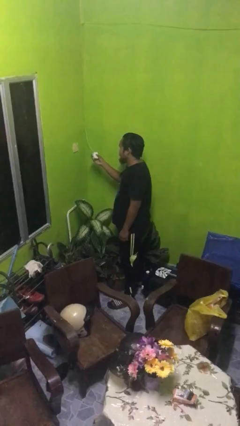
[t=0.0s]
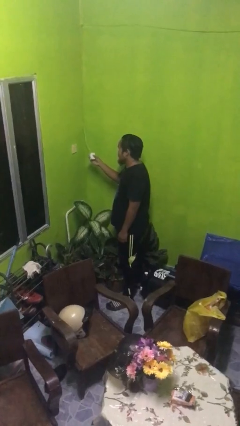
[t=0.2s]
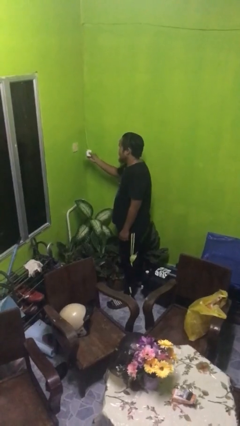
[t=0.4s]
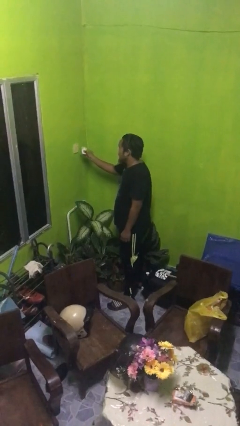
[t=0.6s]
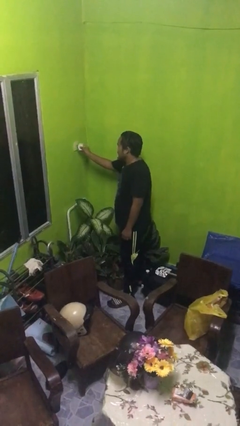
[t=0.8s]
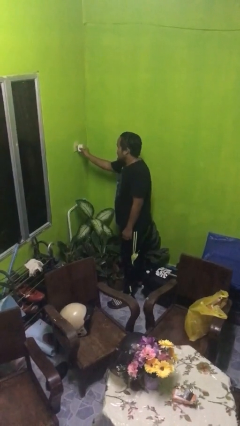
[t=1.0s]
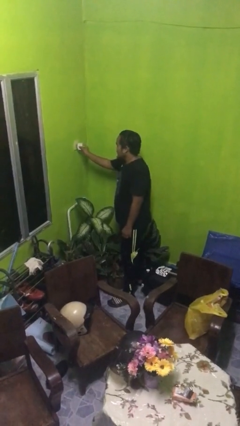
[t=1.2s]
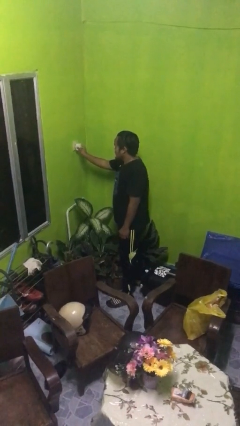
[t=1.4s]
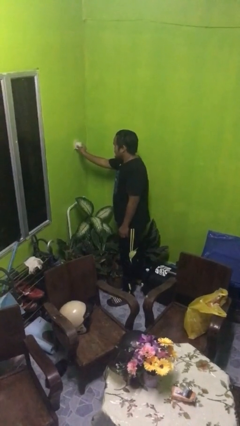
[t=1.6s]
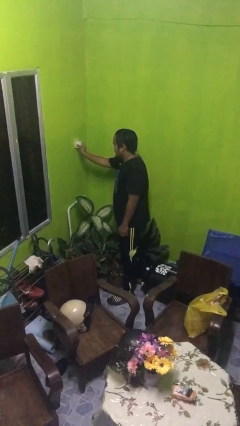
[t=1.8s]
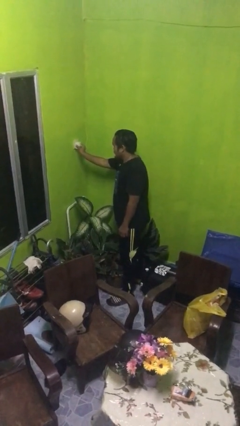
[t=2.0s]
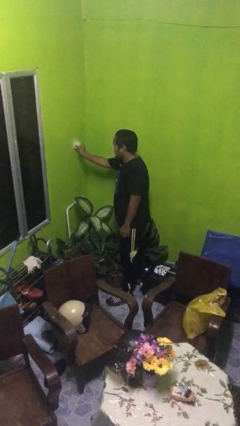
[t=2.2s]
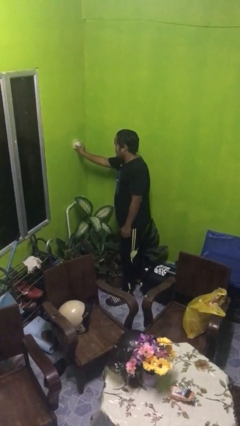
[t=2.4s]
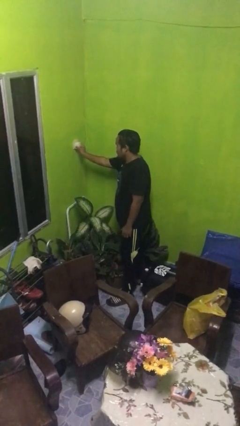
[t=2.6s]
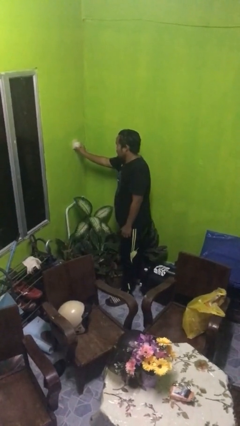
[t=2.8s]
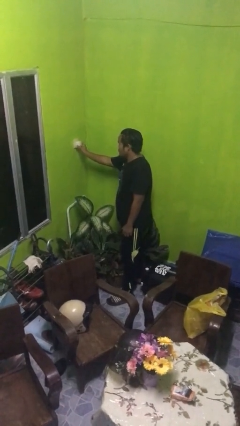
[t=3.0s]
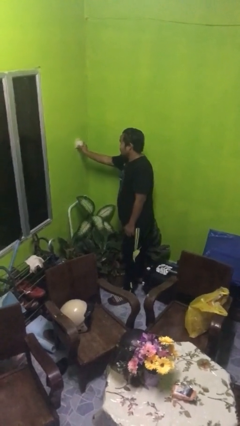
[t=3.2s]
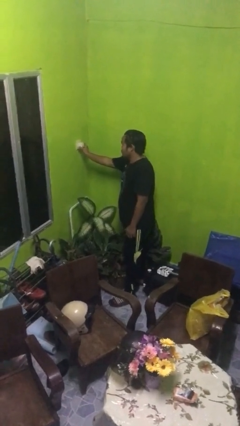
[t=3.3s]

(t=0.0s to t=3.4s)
person plugs into electrical socket

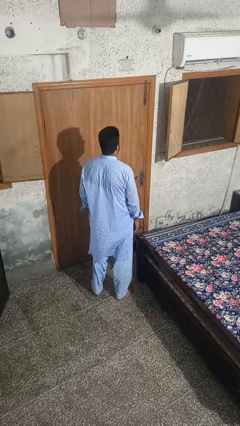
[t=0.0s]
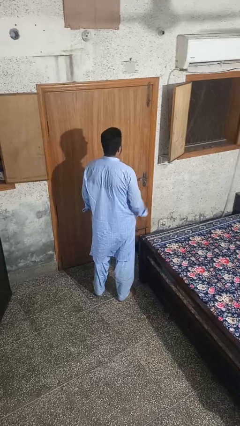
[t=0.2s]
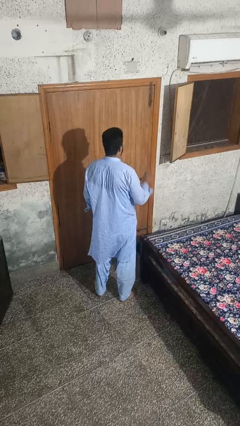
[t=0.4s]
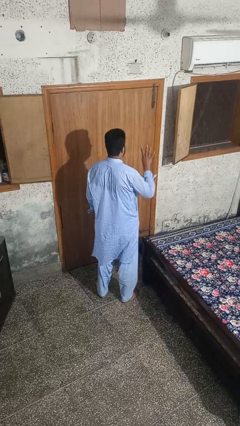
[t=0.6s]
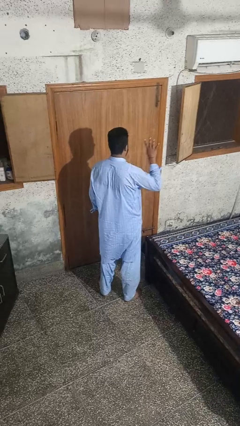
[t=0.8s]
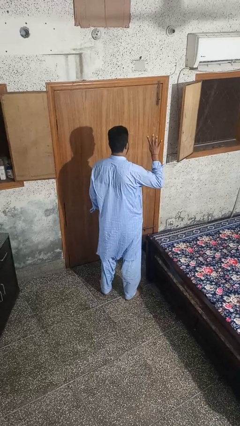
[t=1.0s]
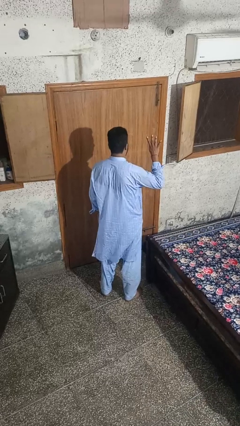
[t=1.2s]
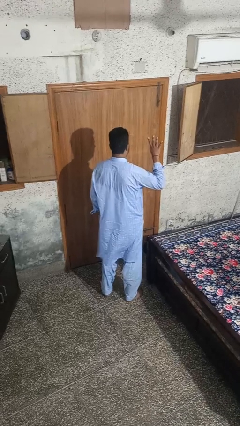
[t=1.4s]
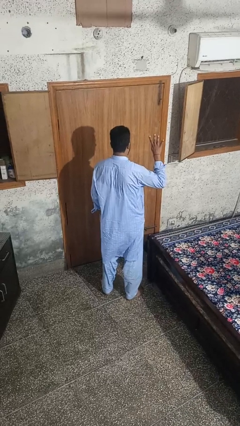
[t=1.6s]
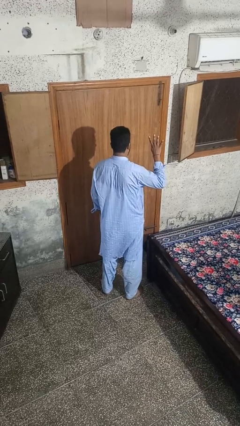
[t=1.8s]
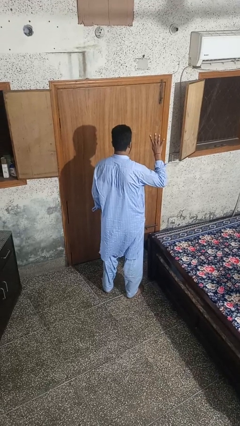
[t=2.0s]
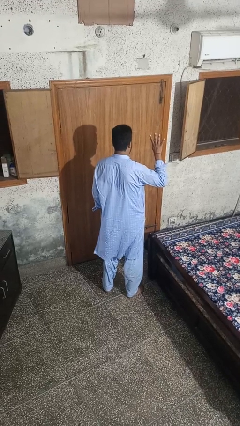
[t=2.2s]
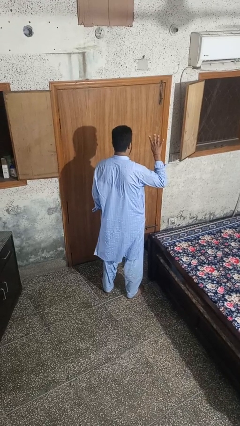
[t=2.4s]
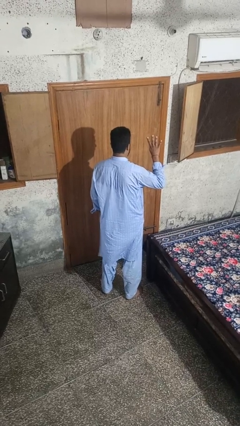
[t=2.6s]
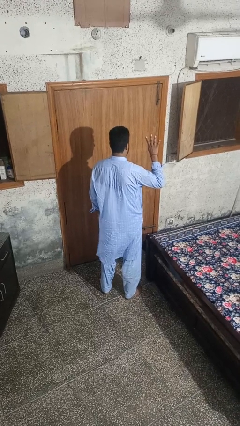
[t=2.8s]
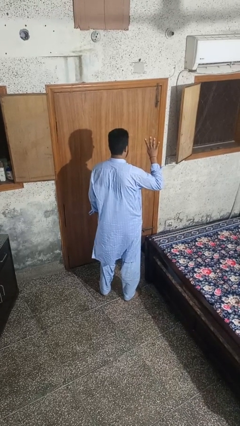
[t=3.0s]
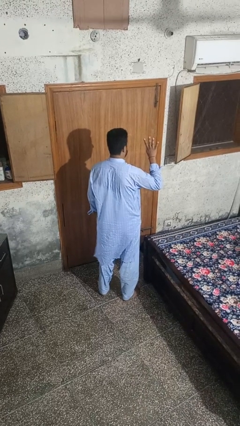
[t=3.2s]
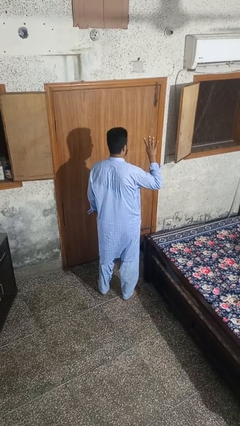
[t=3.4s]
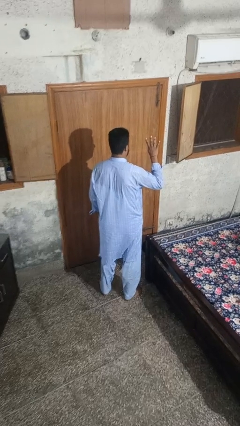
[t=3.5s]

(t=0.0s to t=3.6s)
person gestures number four

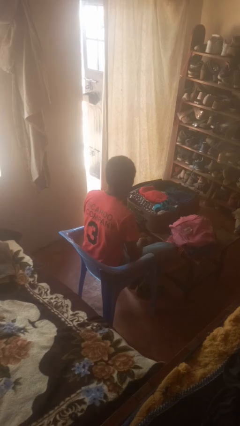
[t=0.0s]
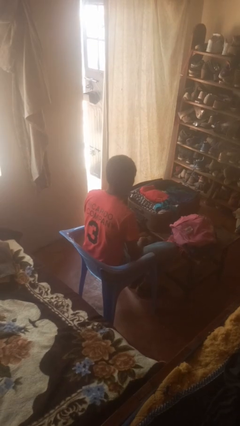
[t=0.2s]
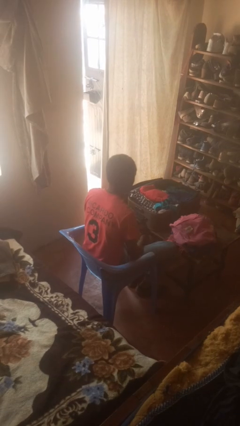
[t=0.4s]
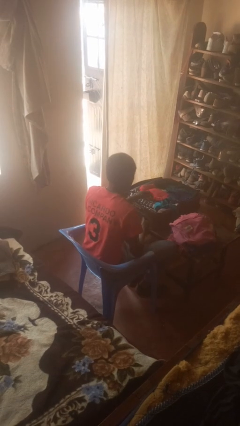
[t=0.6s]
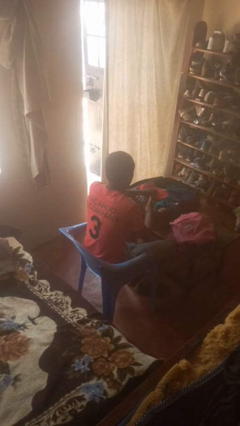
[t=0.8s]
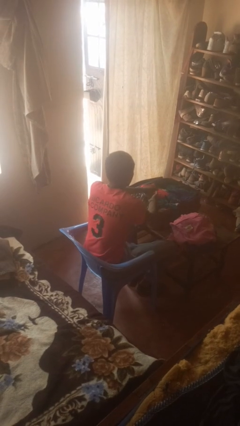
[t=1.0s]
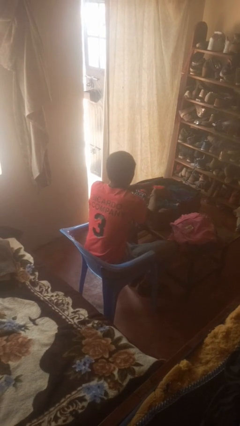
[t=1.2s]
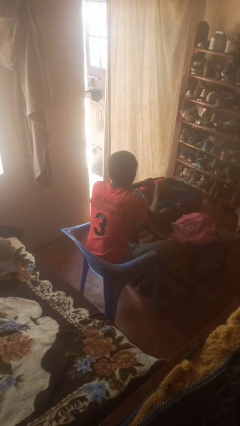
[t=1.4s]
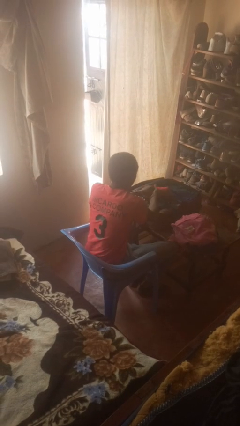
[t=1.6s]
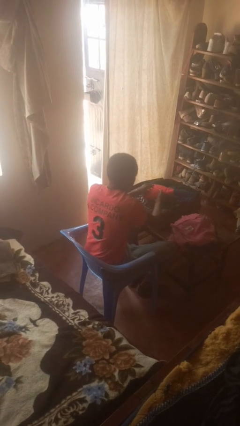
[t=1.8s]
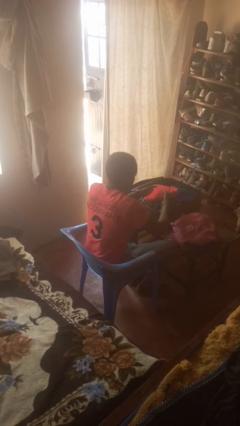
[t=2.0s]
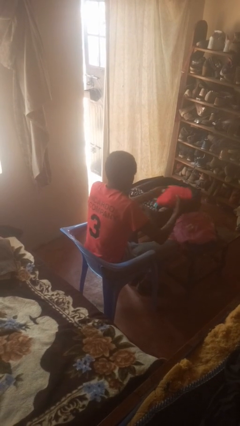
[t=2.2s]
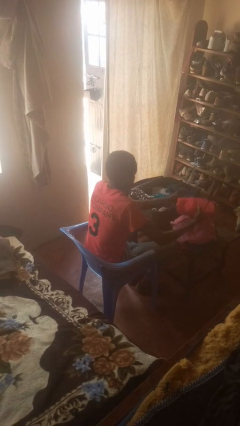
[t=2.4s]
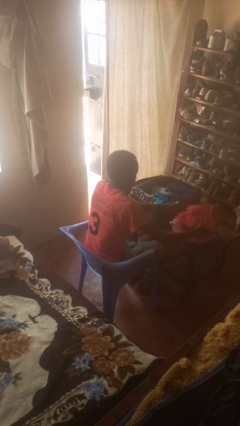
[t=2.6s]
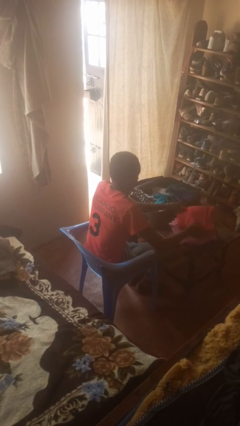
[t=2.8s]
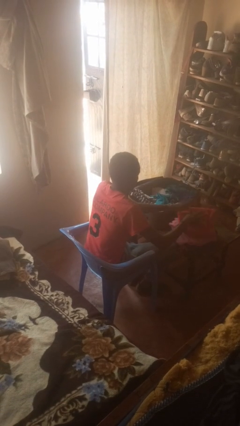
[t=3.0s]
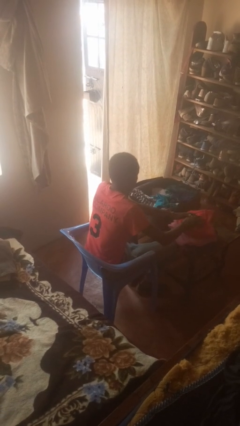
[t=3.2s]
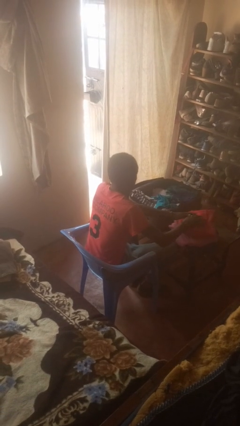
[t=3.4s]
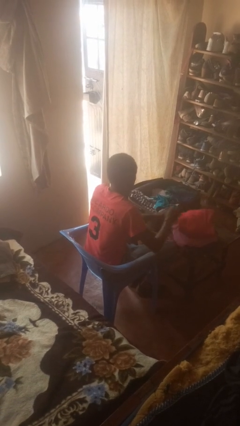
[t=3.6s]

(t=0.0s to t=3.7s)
person unloads clothes from suitcase

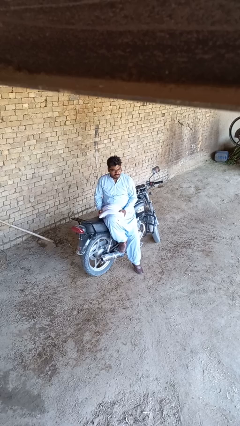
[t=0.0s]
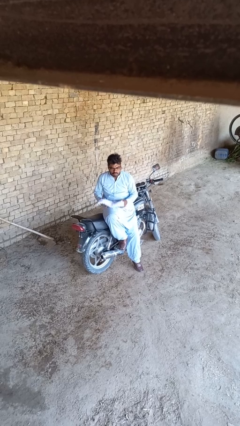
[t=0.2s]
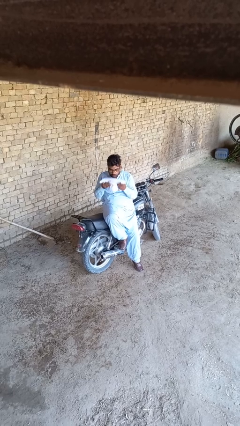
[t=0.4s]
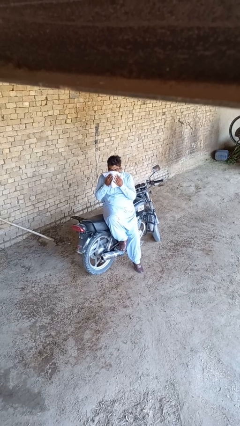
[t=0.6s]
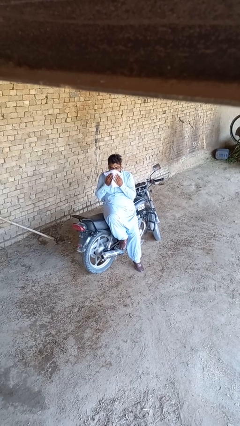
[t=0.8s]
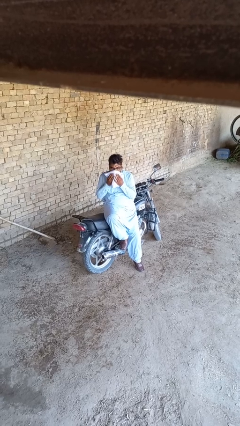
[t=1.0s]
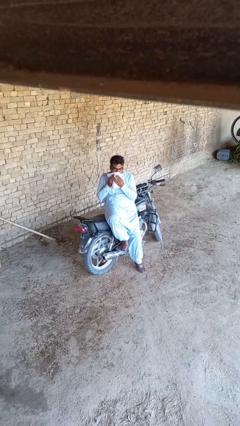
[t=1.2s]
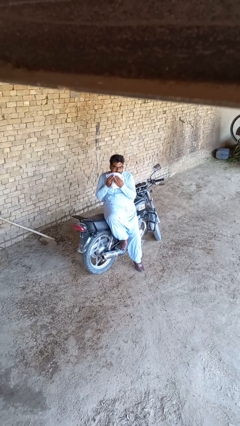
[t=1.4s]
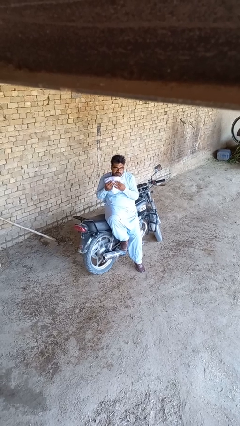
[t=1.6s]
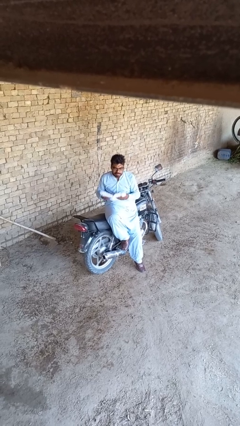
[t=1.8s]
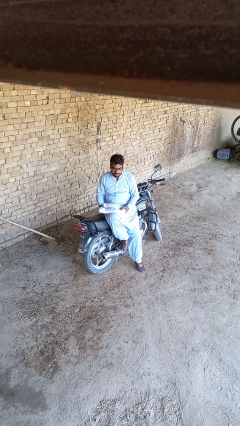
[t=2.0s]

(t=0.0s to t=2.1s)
person wipes mouth with napkin

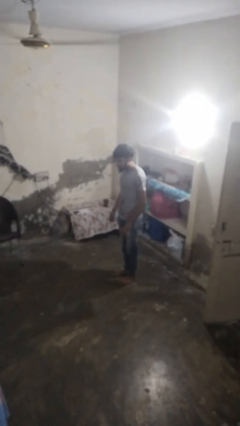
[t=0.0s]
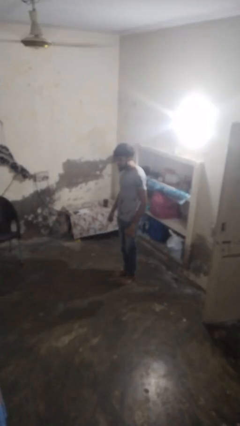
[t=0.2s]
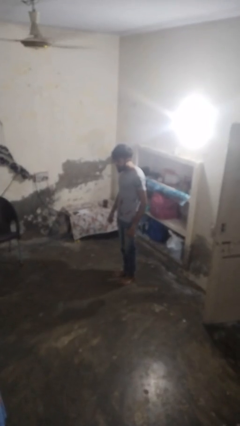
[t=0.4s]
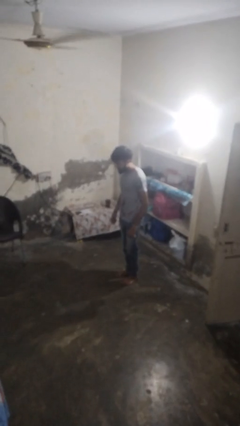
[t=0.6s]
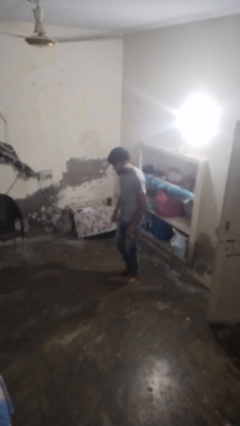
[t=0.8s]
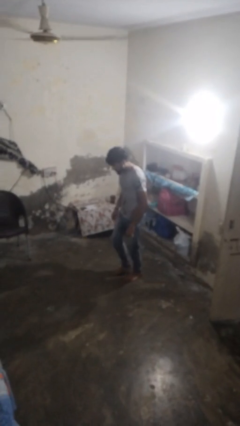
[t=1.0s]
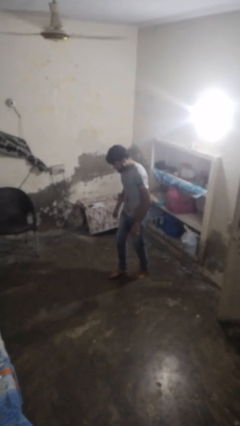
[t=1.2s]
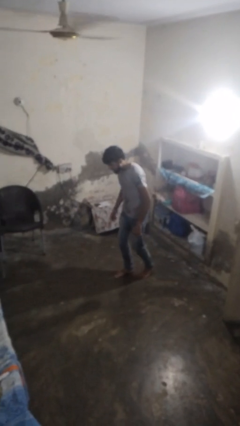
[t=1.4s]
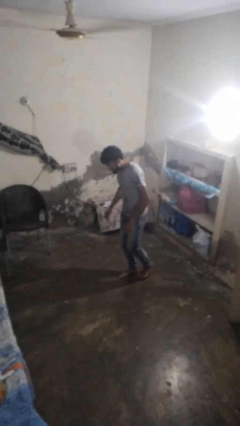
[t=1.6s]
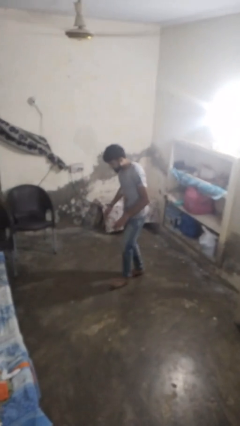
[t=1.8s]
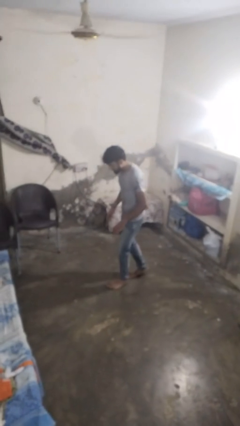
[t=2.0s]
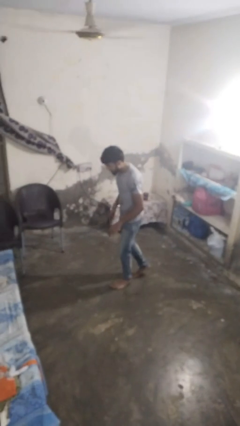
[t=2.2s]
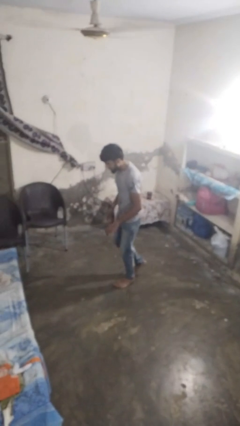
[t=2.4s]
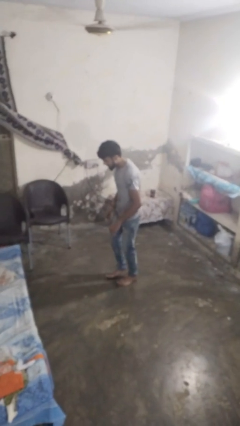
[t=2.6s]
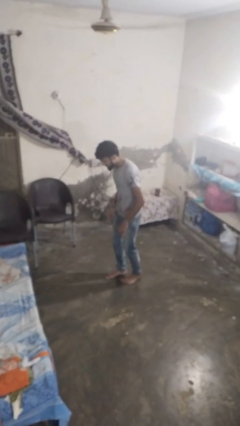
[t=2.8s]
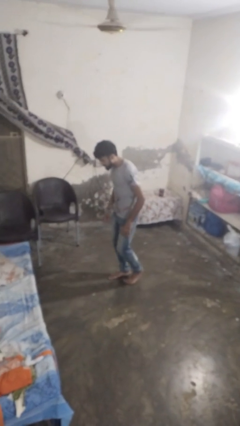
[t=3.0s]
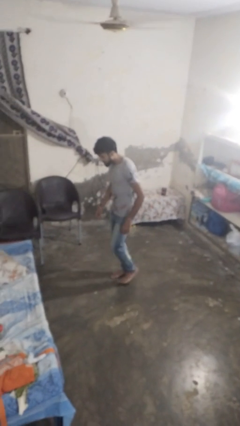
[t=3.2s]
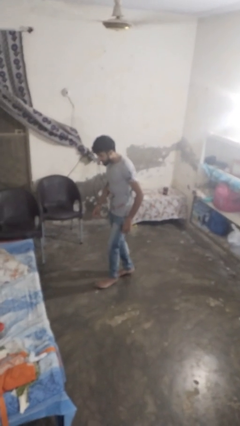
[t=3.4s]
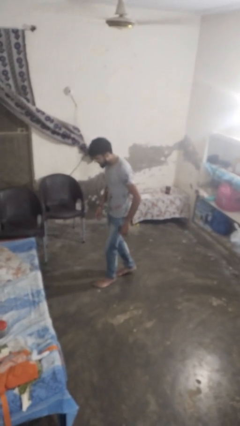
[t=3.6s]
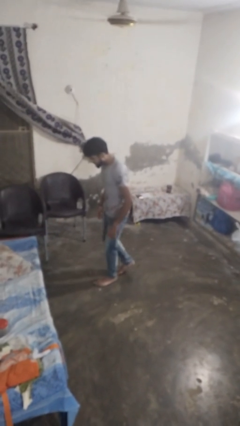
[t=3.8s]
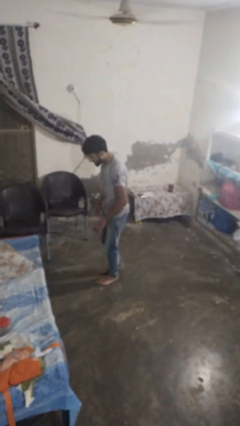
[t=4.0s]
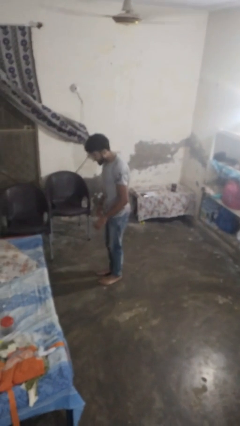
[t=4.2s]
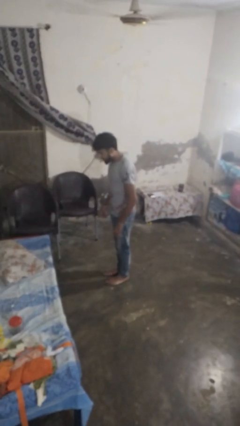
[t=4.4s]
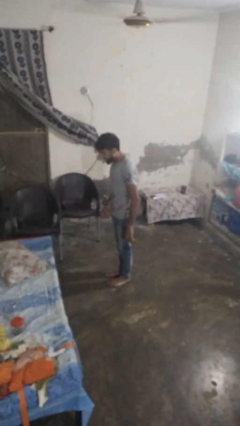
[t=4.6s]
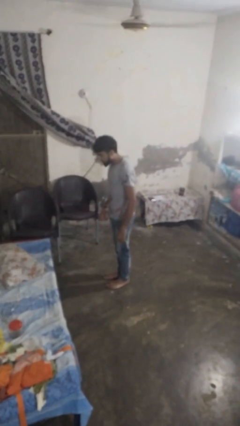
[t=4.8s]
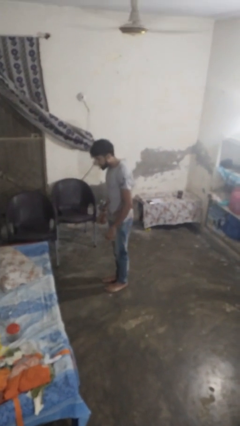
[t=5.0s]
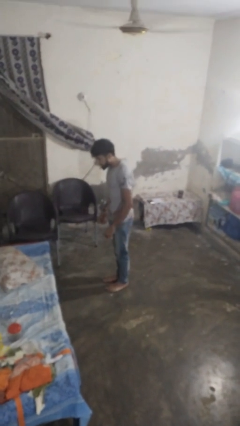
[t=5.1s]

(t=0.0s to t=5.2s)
person walks tiptoe
